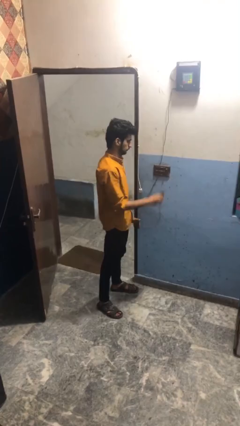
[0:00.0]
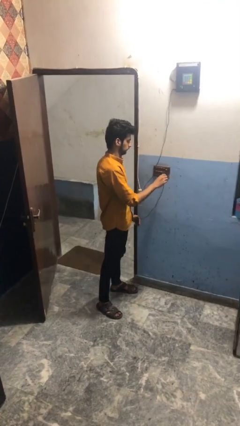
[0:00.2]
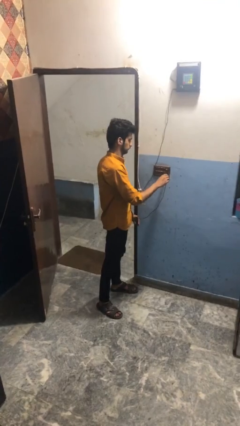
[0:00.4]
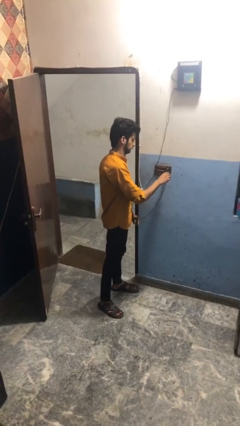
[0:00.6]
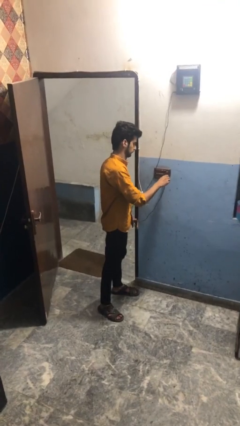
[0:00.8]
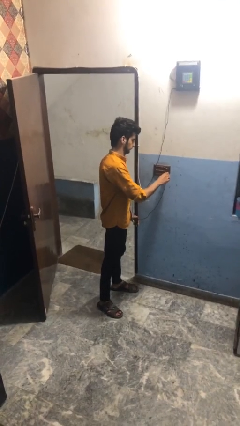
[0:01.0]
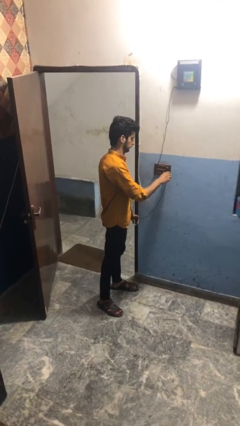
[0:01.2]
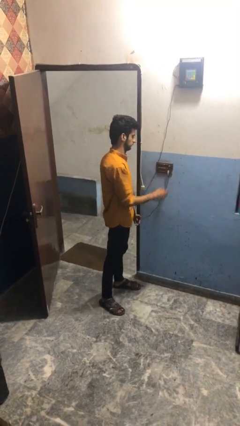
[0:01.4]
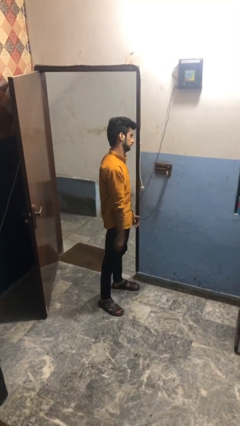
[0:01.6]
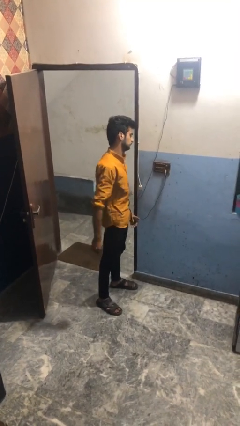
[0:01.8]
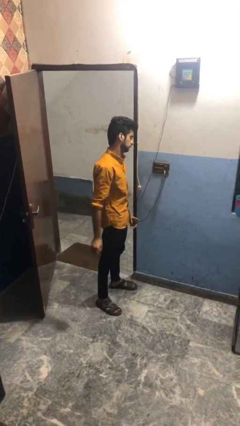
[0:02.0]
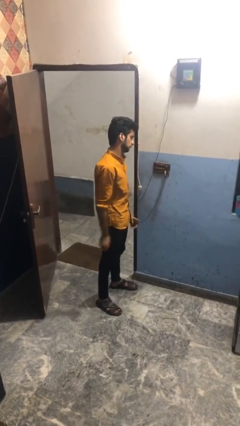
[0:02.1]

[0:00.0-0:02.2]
person plugs into electrical socket

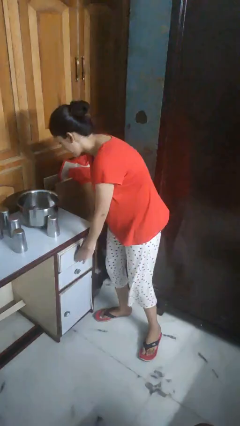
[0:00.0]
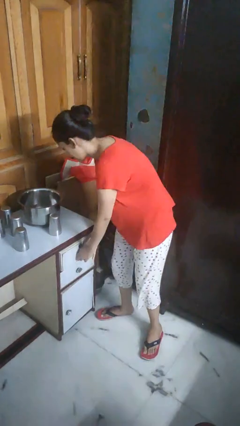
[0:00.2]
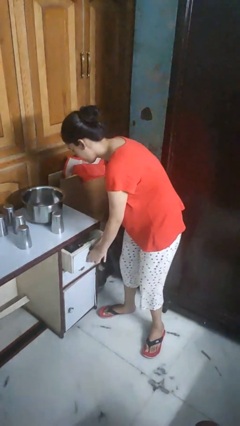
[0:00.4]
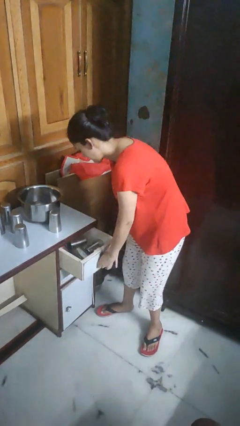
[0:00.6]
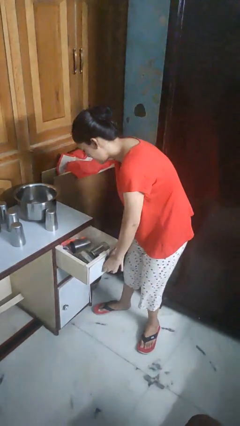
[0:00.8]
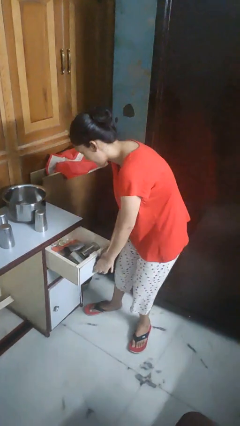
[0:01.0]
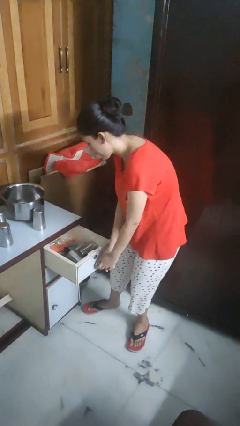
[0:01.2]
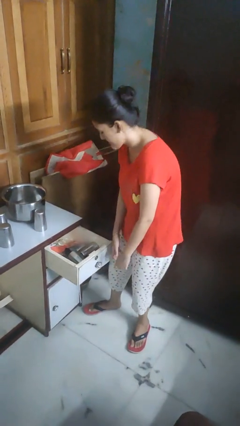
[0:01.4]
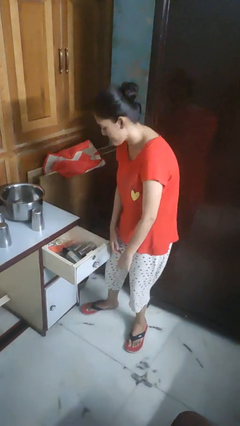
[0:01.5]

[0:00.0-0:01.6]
person opens kitchen drawer

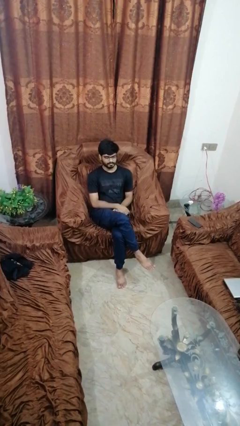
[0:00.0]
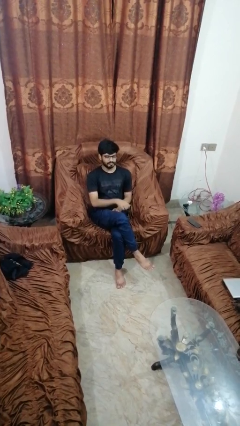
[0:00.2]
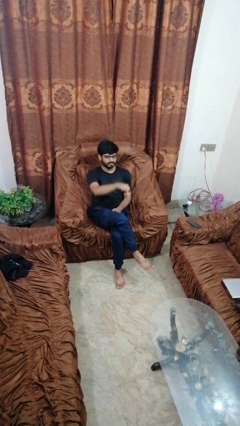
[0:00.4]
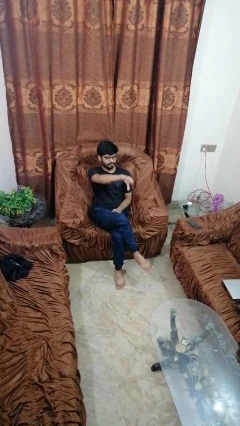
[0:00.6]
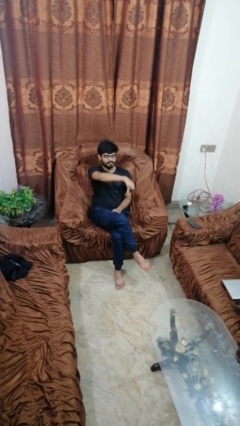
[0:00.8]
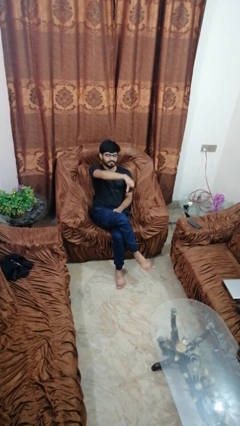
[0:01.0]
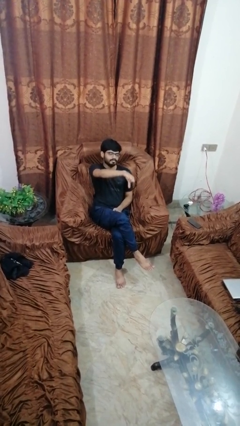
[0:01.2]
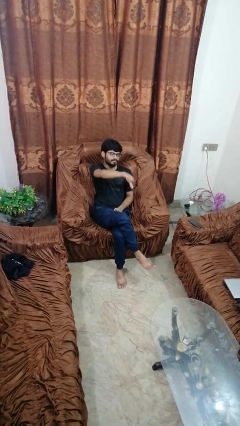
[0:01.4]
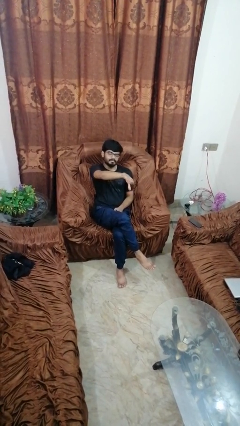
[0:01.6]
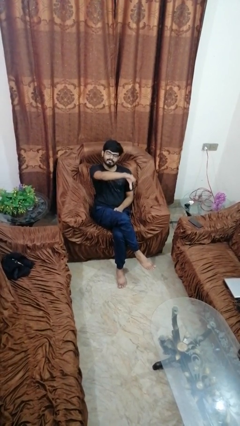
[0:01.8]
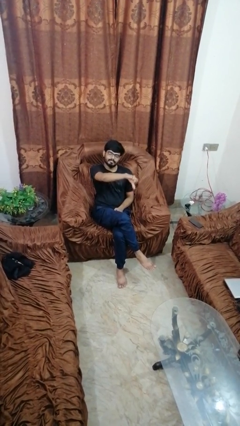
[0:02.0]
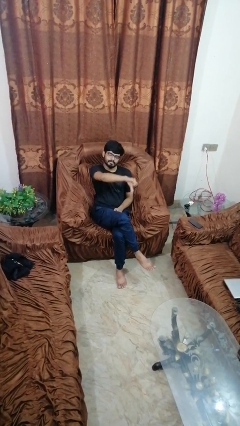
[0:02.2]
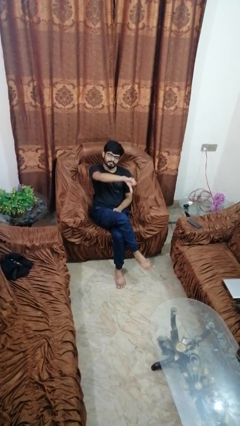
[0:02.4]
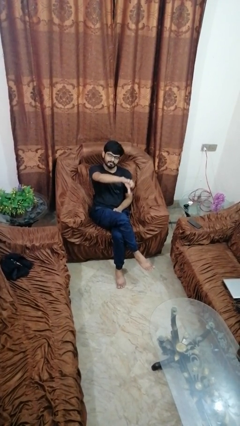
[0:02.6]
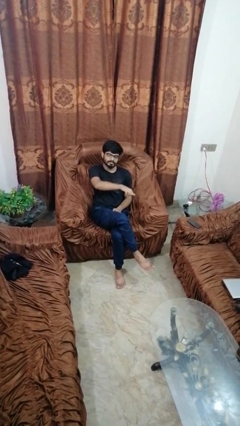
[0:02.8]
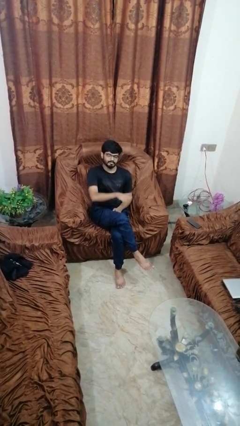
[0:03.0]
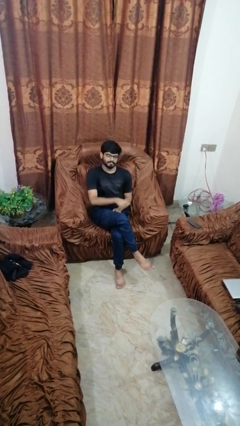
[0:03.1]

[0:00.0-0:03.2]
person gestures thumbs down

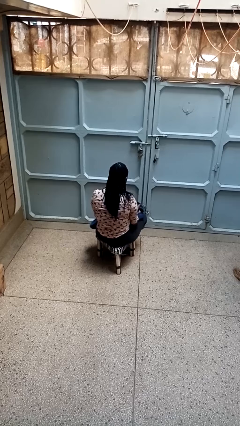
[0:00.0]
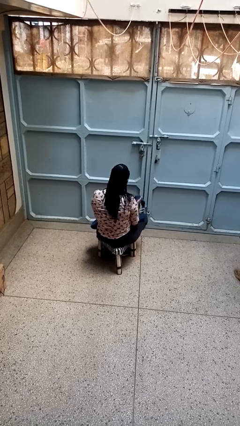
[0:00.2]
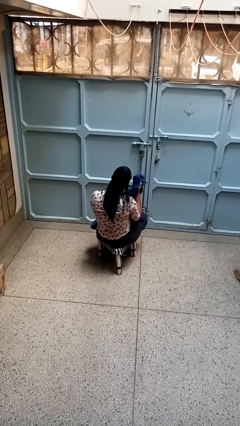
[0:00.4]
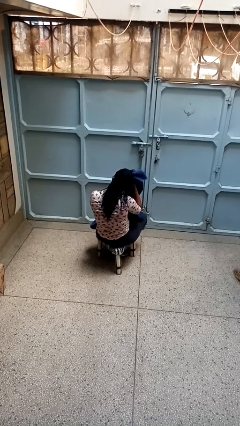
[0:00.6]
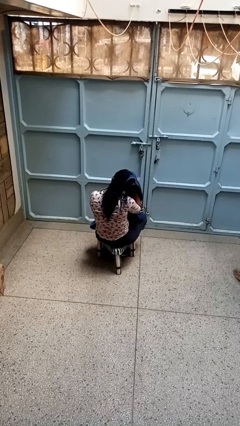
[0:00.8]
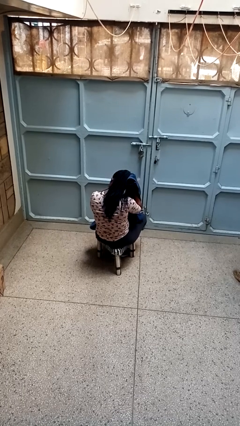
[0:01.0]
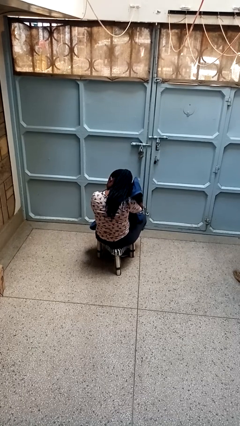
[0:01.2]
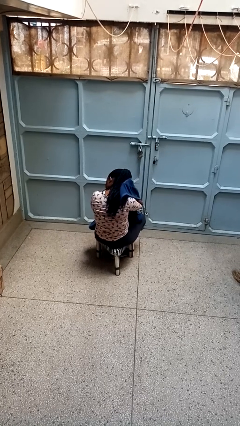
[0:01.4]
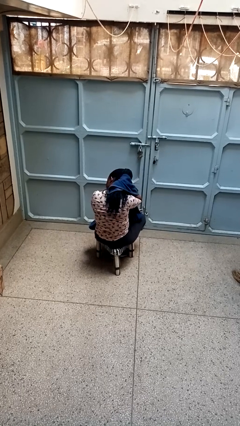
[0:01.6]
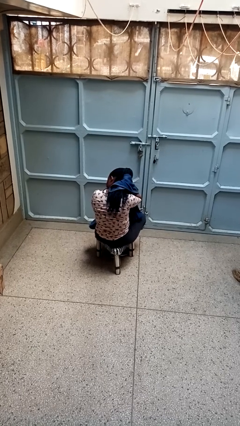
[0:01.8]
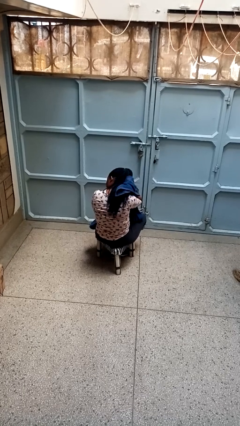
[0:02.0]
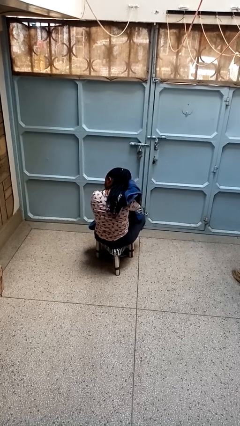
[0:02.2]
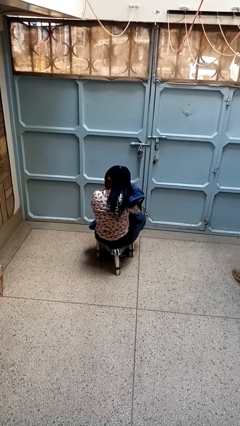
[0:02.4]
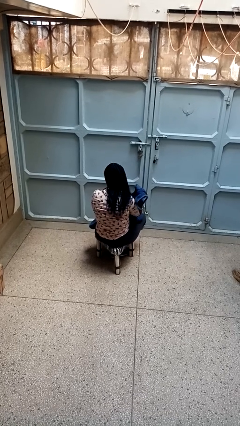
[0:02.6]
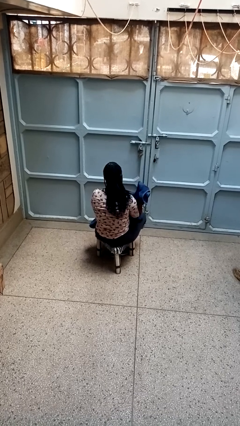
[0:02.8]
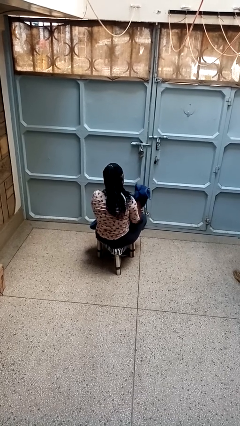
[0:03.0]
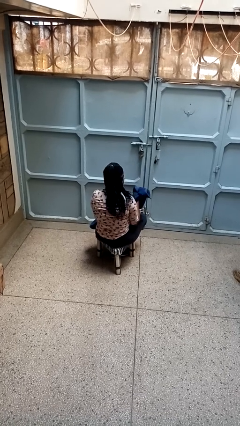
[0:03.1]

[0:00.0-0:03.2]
person dries hair with towel

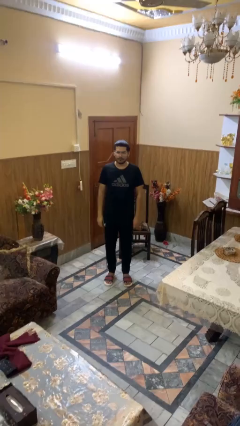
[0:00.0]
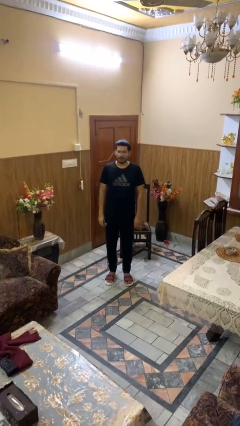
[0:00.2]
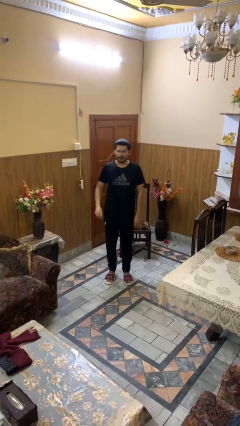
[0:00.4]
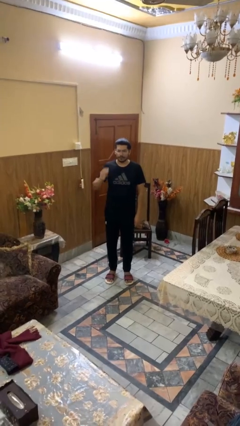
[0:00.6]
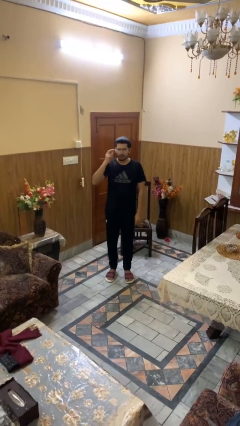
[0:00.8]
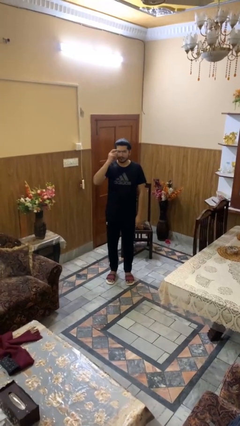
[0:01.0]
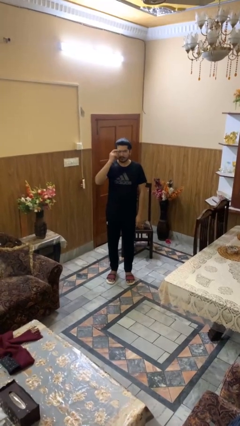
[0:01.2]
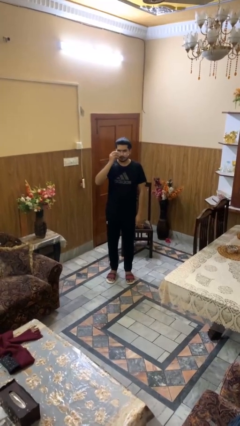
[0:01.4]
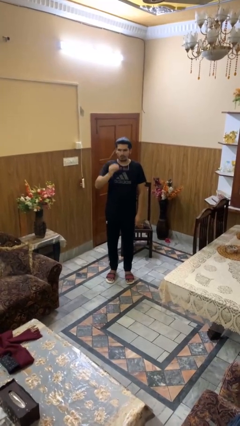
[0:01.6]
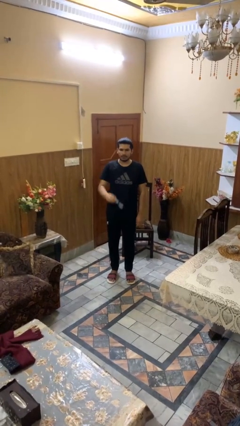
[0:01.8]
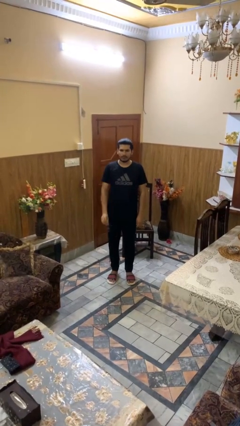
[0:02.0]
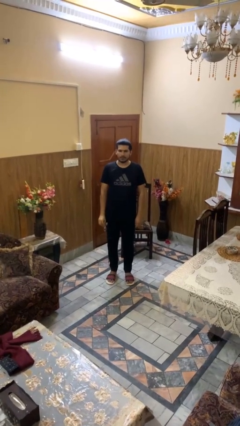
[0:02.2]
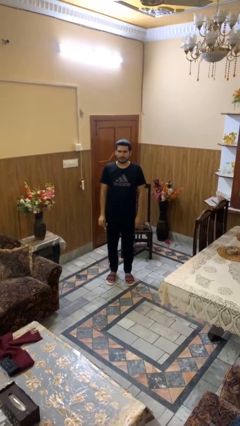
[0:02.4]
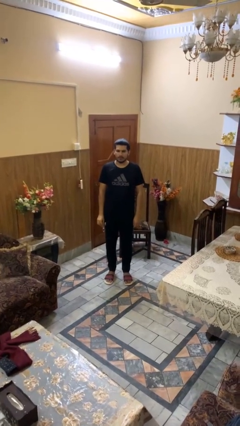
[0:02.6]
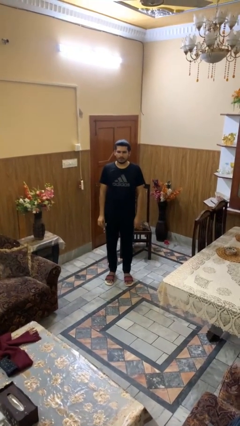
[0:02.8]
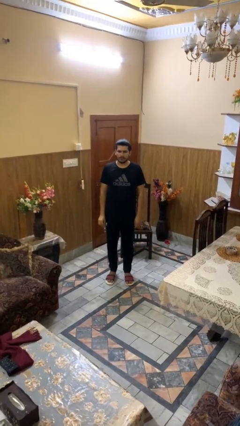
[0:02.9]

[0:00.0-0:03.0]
person takes off glasses

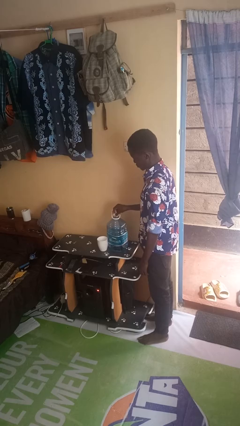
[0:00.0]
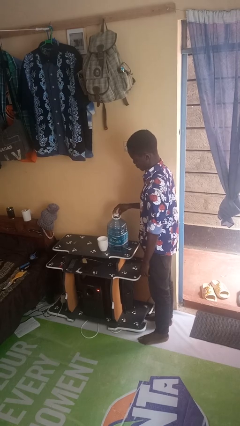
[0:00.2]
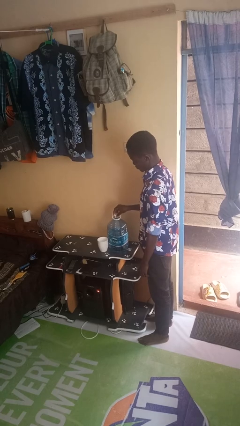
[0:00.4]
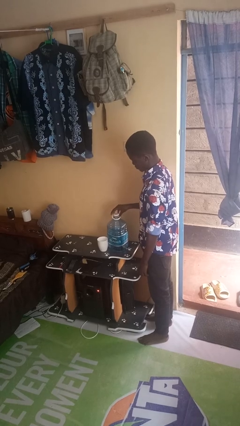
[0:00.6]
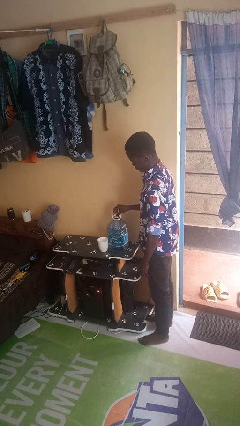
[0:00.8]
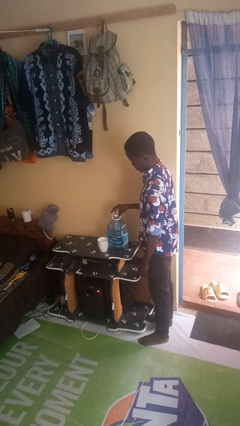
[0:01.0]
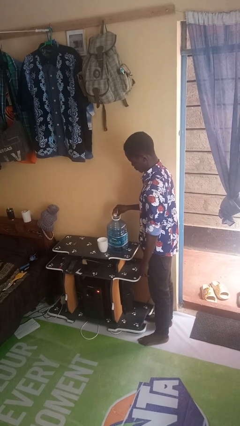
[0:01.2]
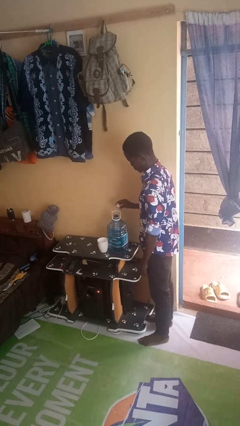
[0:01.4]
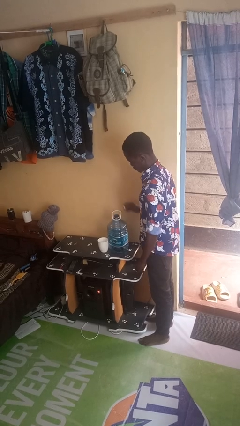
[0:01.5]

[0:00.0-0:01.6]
person unscrews lid from bottle

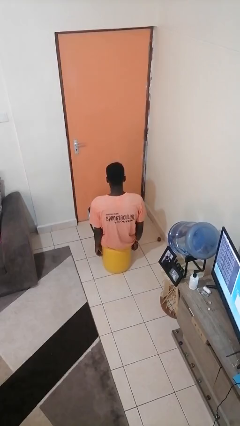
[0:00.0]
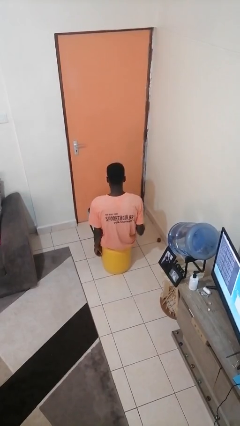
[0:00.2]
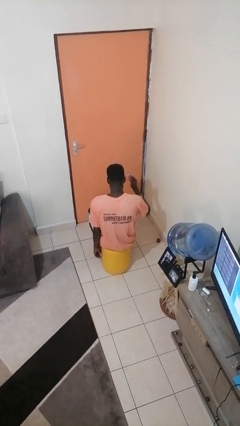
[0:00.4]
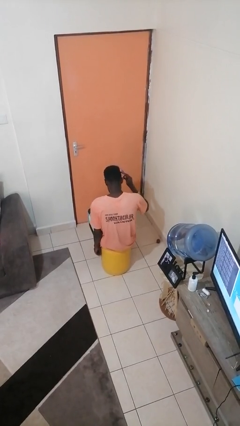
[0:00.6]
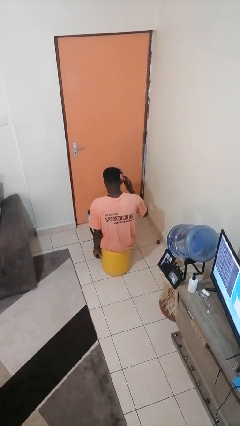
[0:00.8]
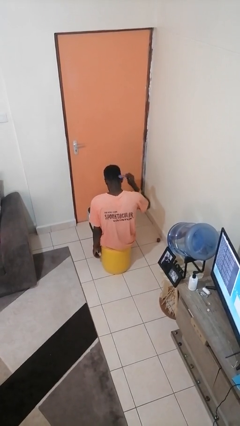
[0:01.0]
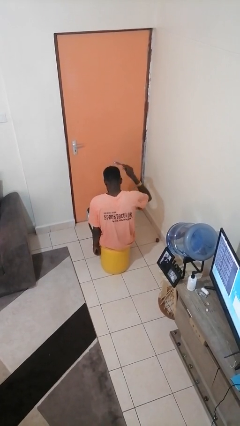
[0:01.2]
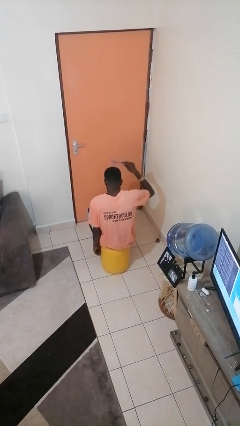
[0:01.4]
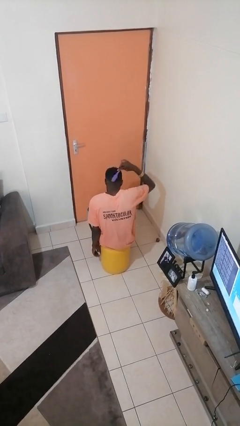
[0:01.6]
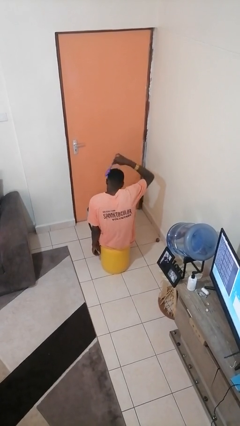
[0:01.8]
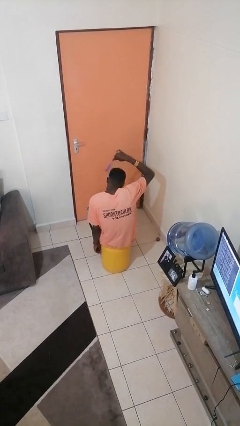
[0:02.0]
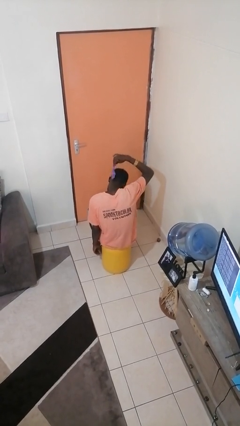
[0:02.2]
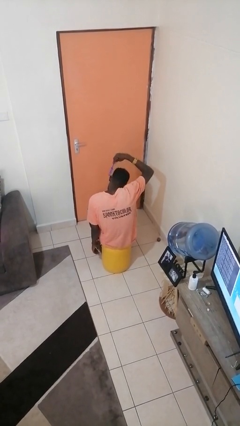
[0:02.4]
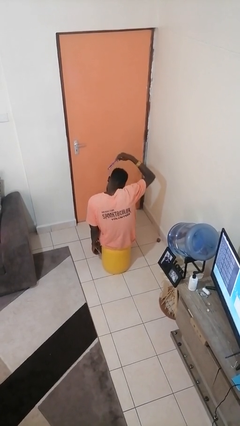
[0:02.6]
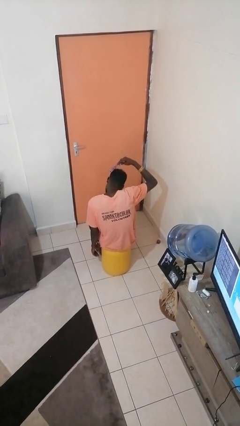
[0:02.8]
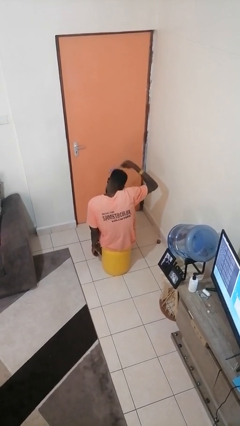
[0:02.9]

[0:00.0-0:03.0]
person brushes hair
